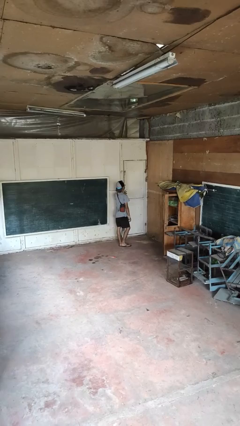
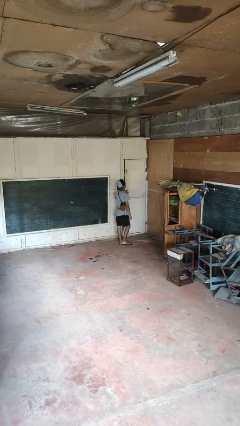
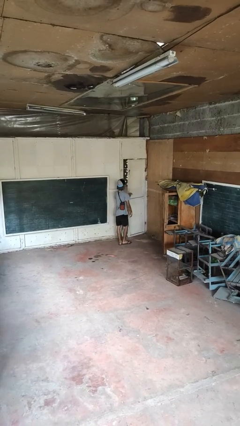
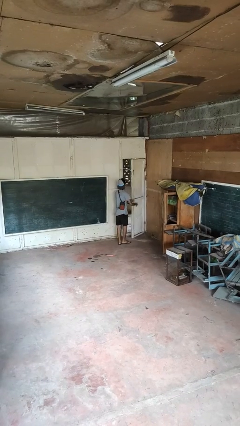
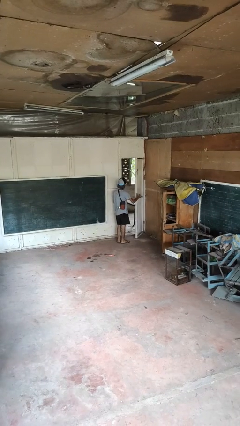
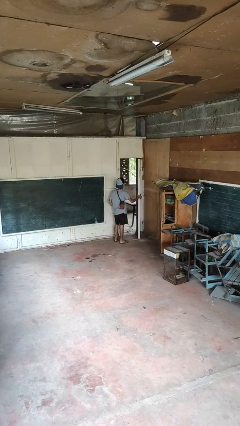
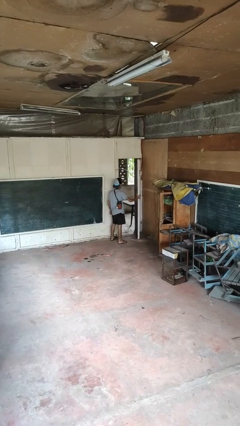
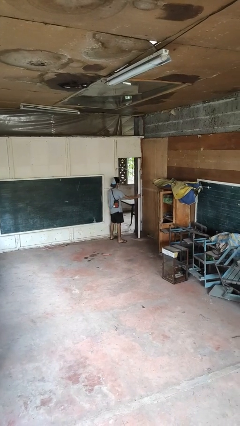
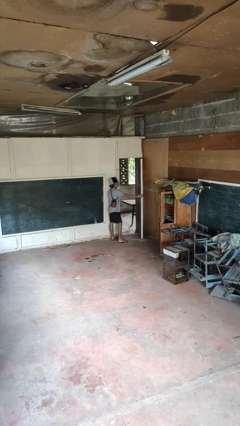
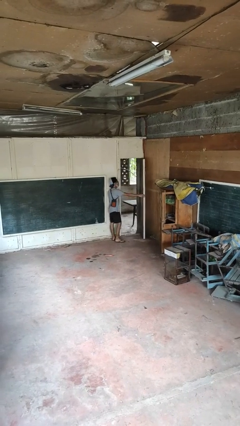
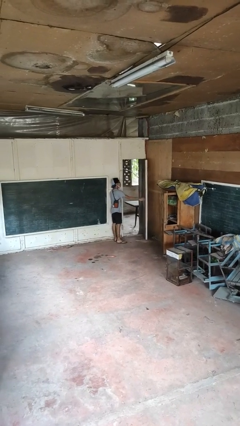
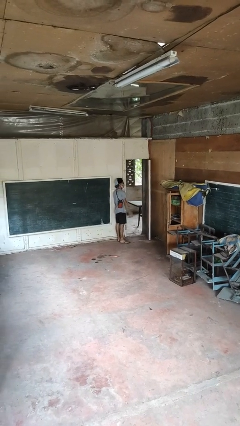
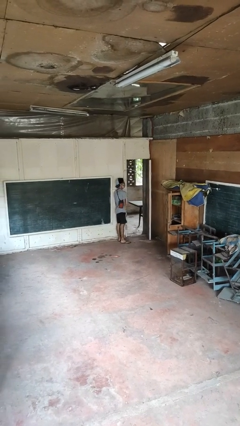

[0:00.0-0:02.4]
person opens facility door

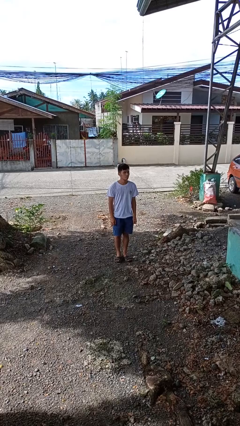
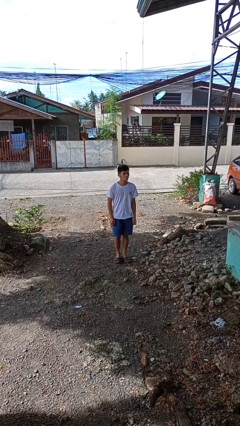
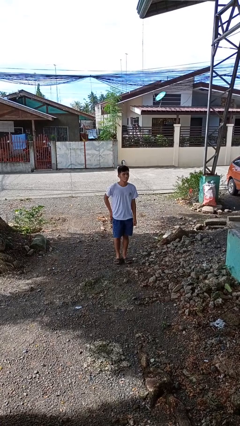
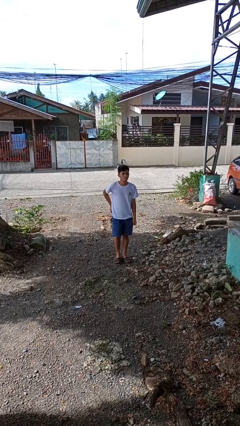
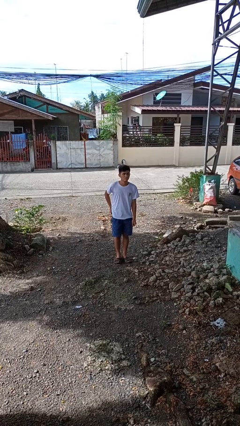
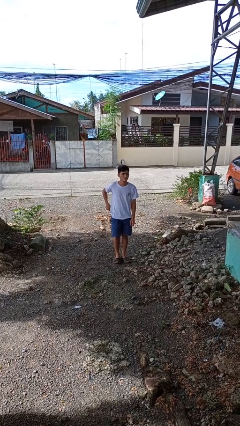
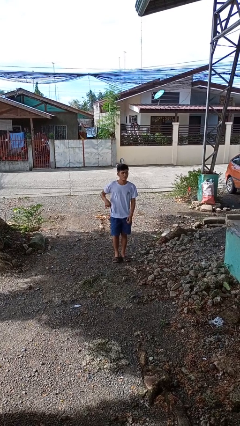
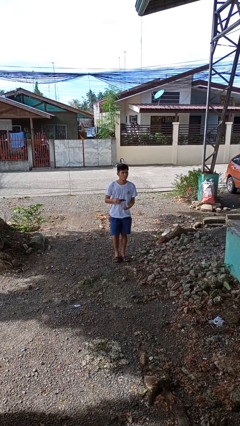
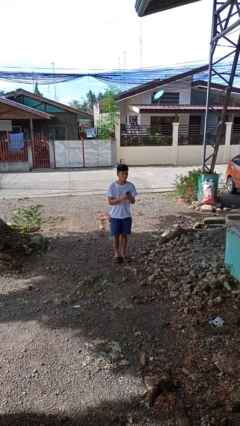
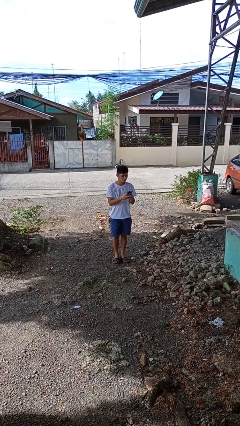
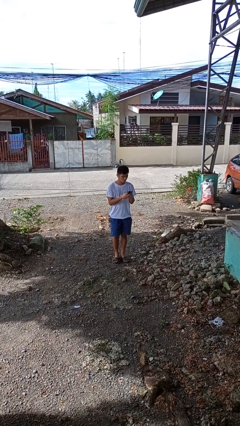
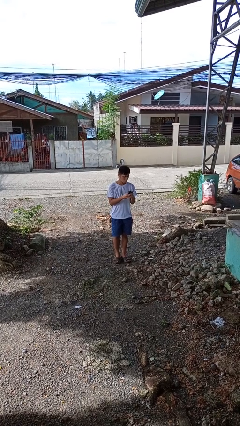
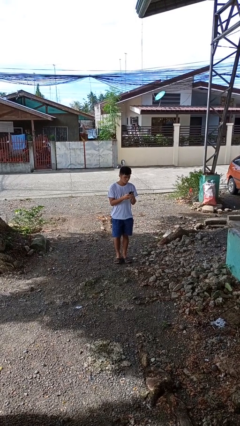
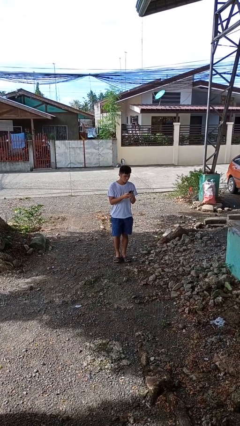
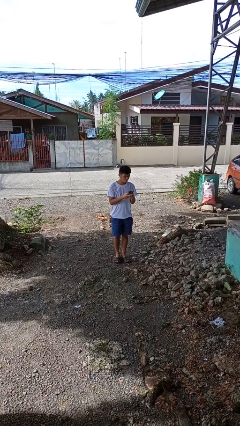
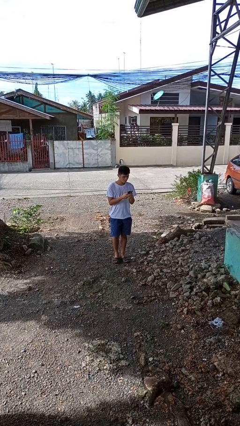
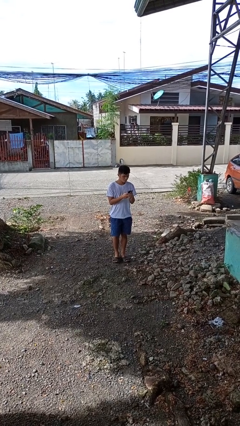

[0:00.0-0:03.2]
person takes phone from pocket

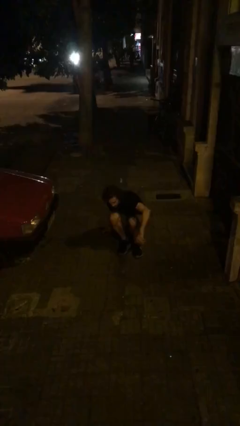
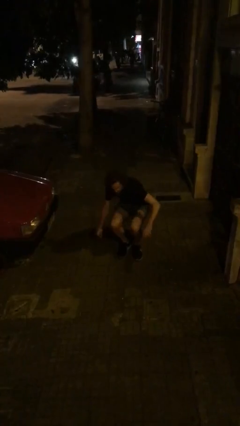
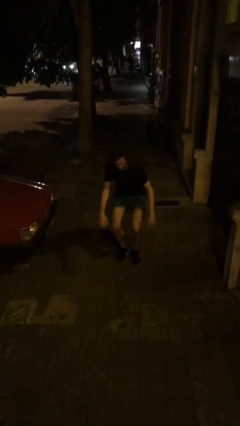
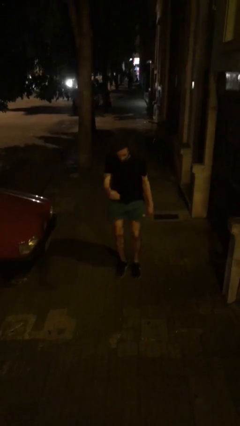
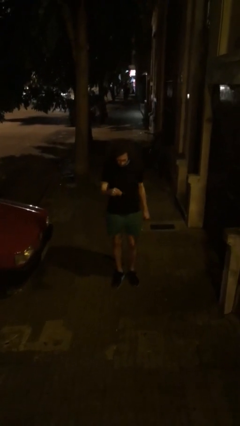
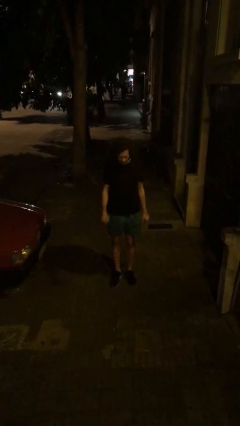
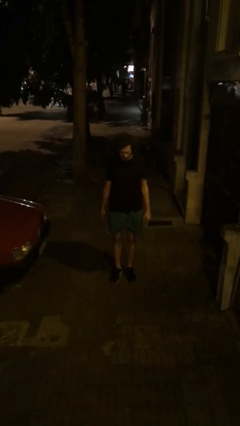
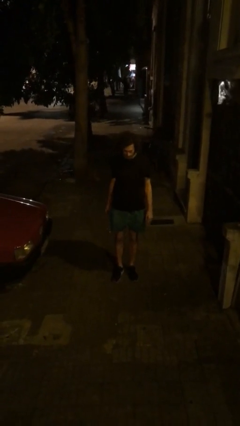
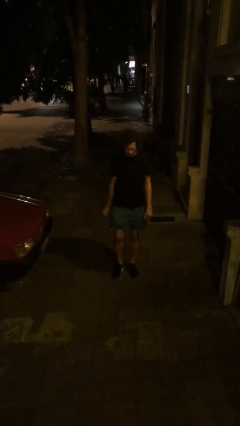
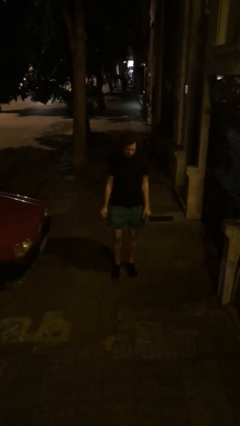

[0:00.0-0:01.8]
person stands up

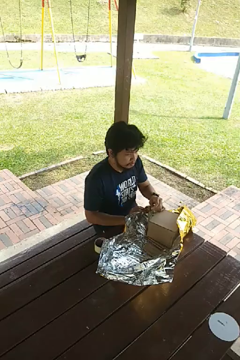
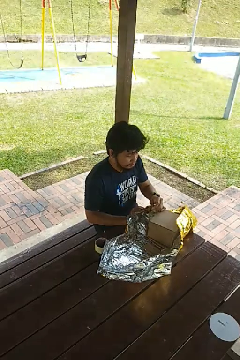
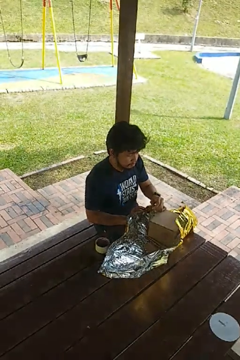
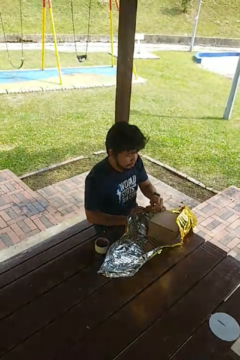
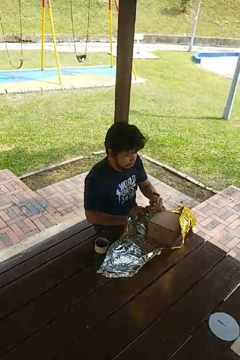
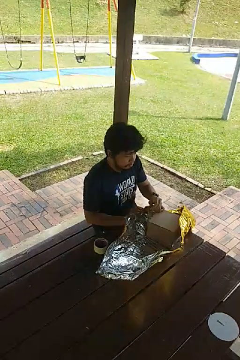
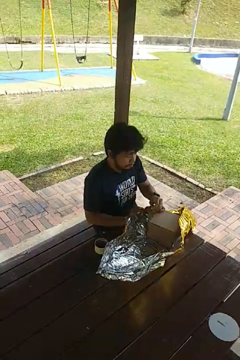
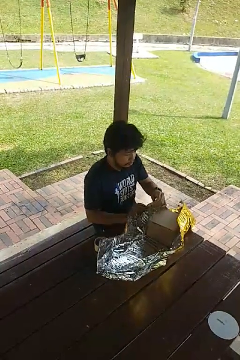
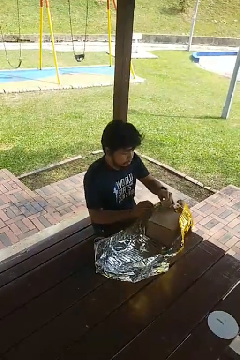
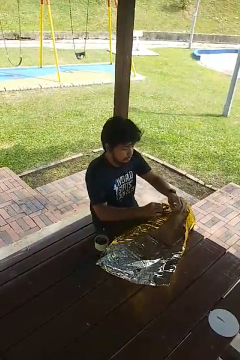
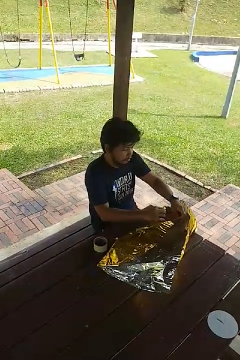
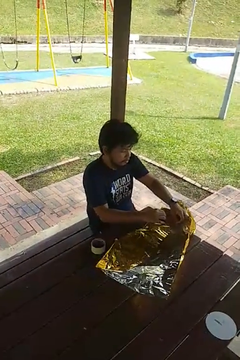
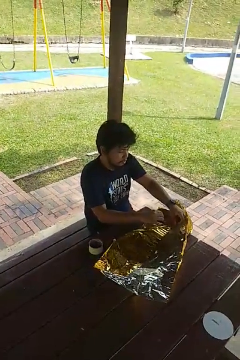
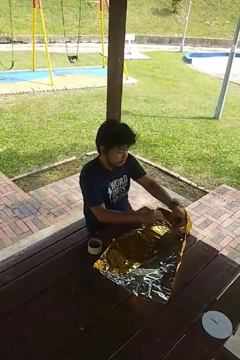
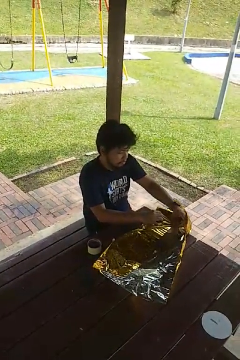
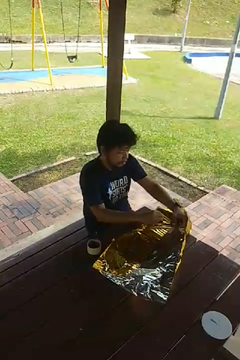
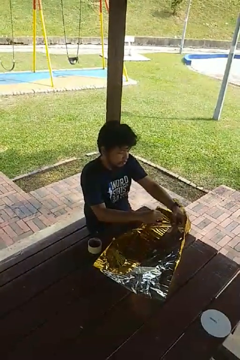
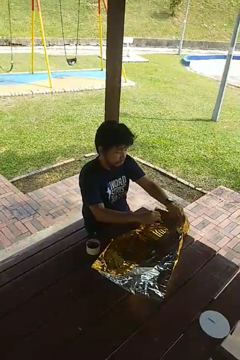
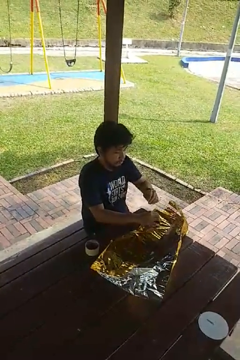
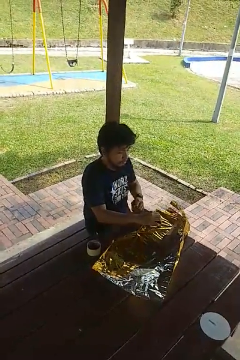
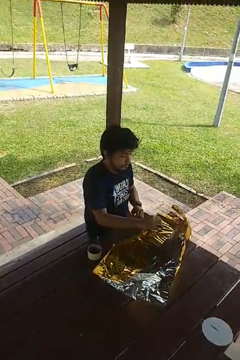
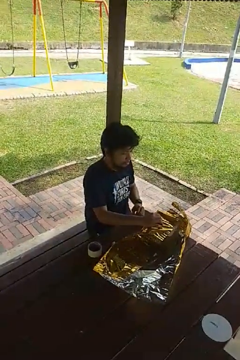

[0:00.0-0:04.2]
person wraps box

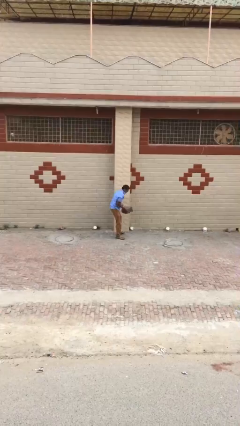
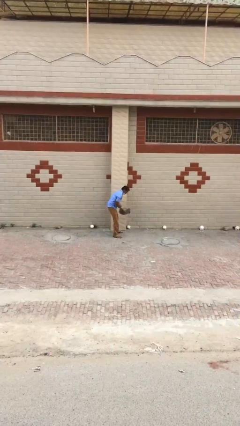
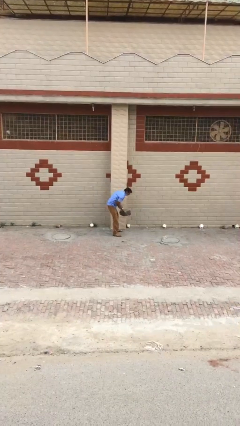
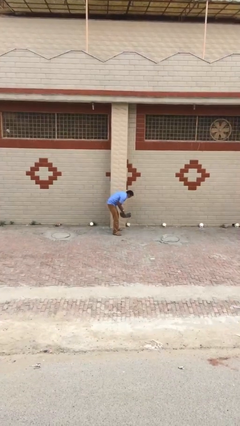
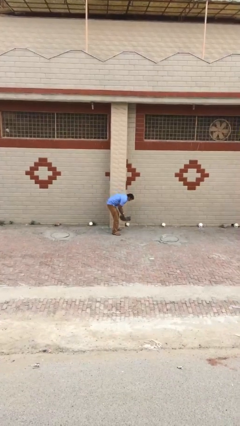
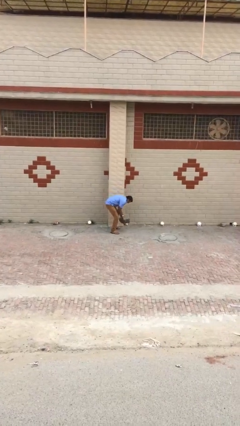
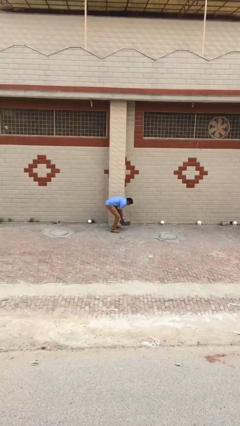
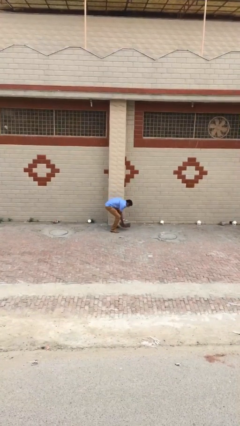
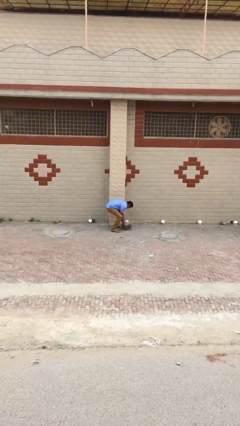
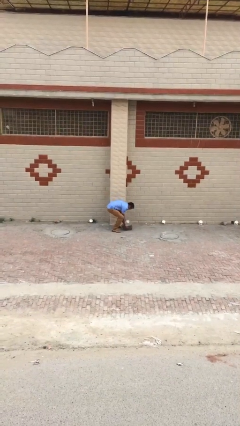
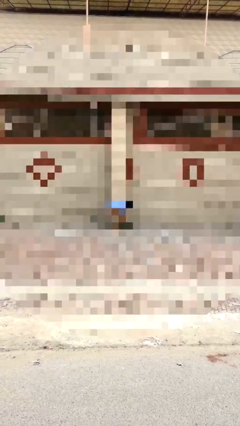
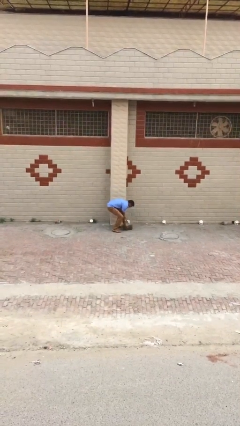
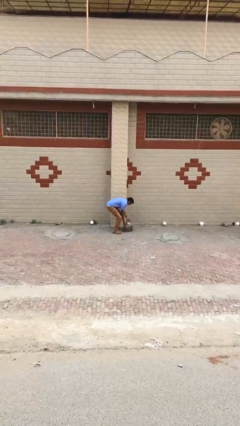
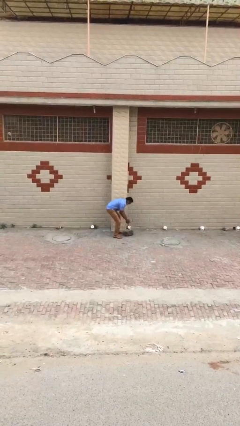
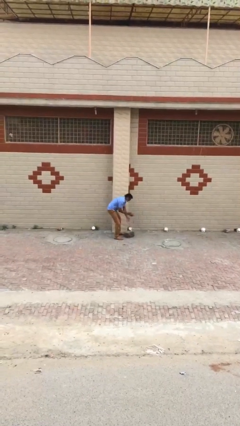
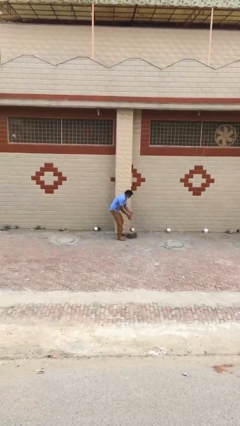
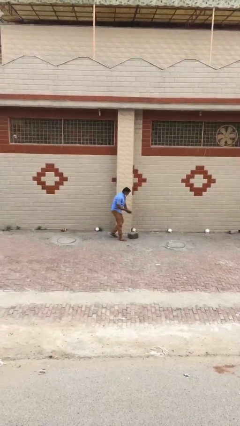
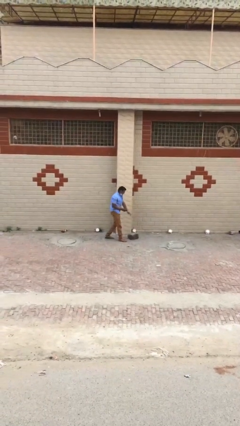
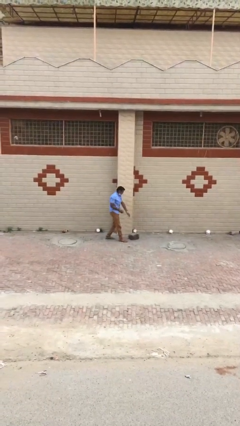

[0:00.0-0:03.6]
person puts down object on floor

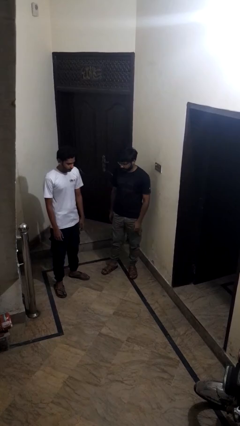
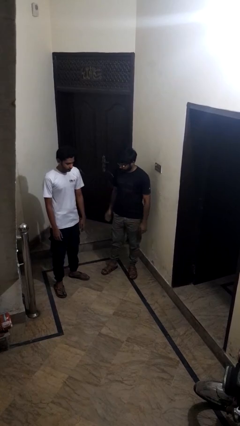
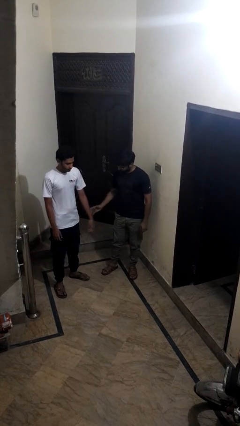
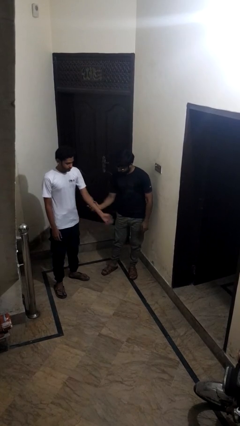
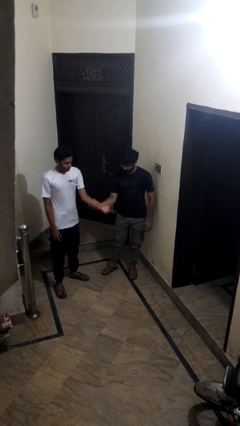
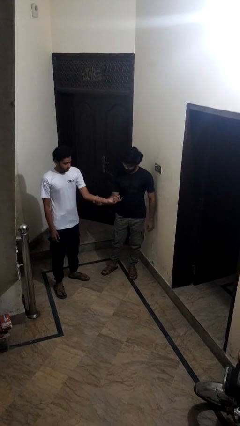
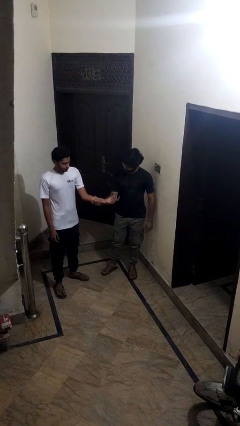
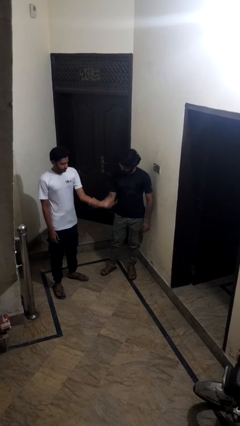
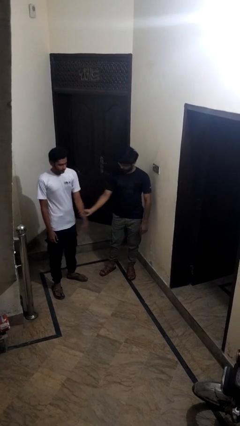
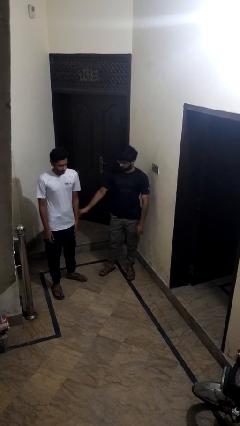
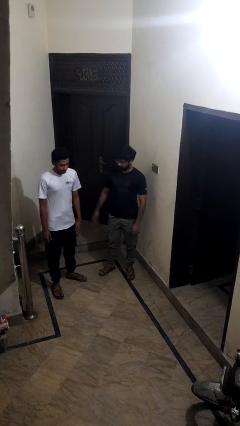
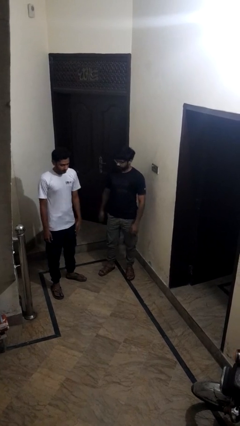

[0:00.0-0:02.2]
person grabs person by forearm

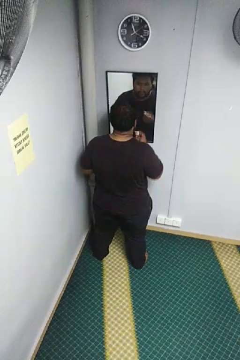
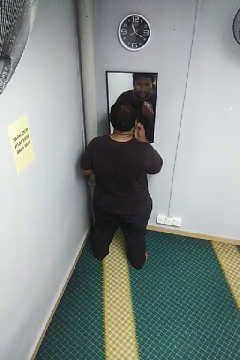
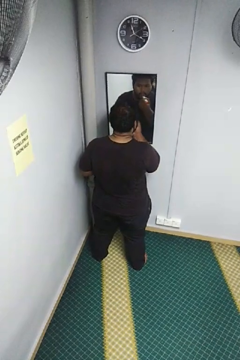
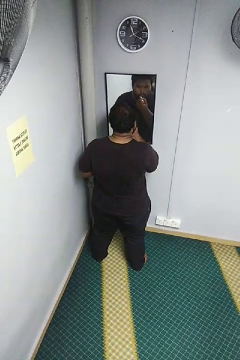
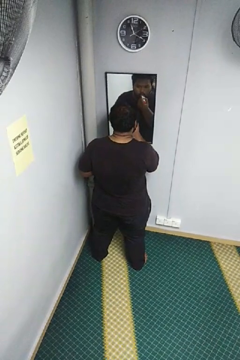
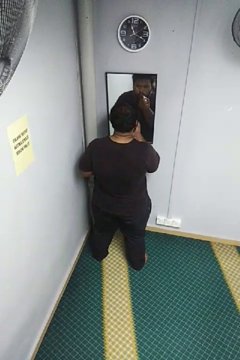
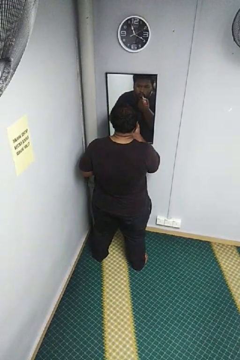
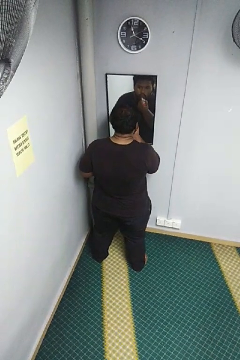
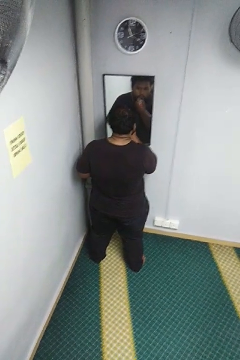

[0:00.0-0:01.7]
person applies lip makeup
